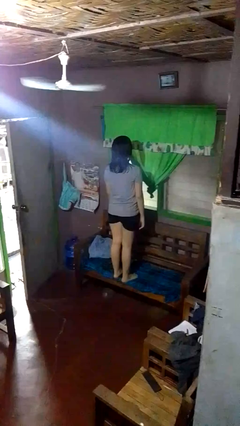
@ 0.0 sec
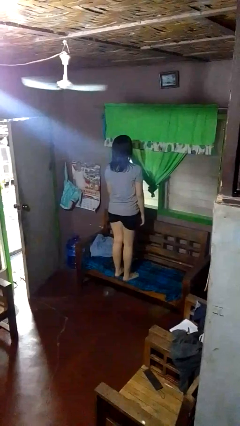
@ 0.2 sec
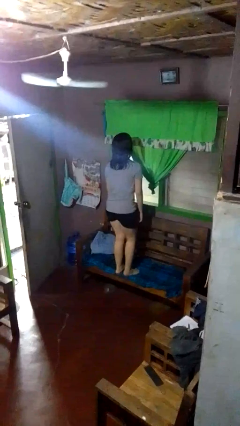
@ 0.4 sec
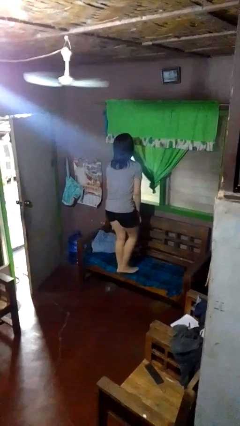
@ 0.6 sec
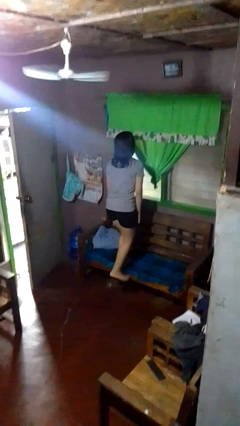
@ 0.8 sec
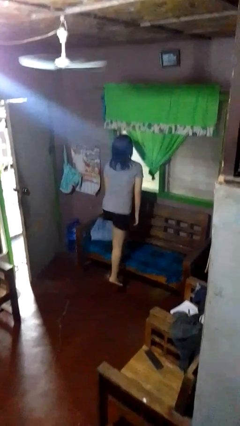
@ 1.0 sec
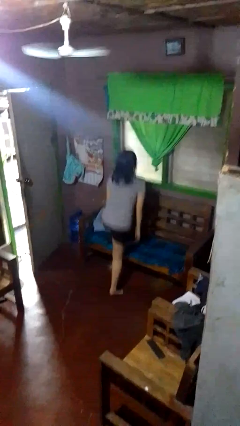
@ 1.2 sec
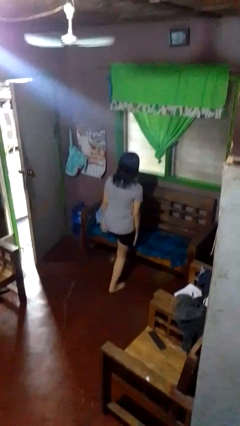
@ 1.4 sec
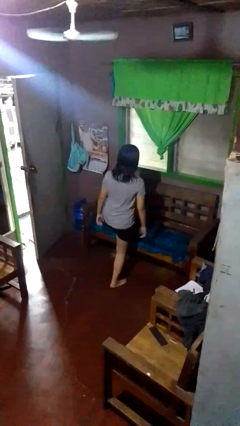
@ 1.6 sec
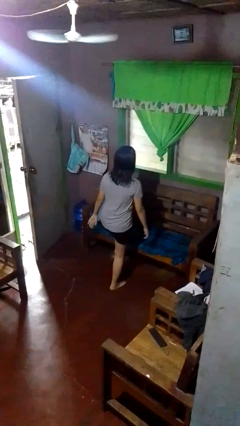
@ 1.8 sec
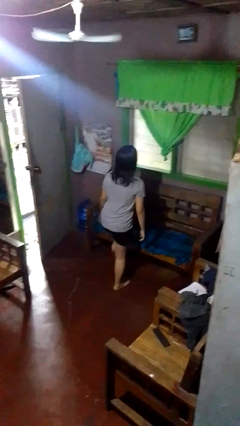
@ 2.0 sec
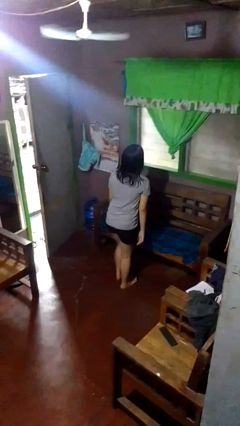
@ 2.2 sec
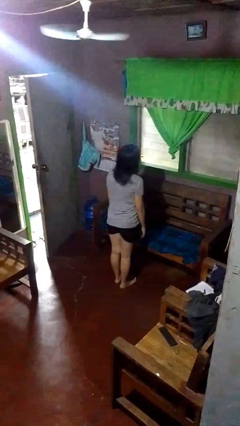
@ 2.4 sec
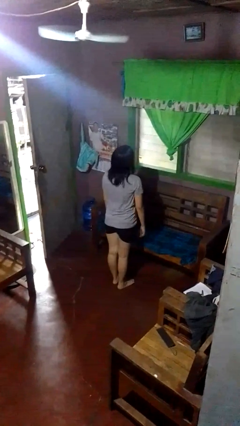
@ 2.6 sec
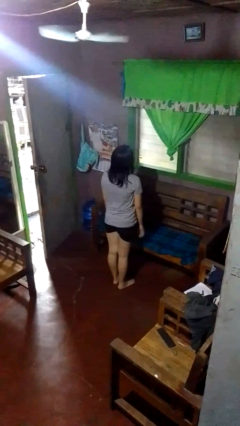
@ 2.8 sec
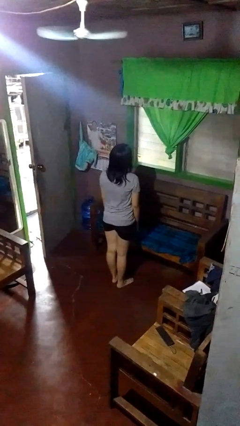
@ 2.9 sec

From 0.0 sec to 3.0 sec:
person climbs off couch

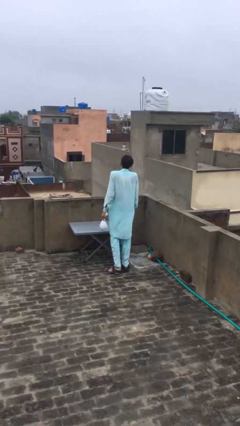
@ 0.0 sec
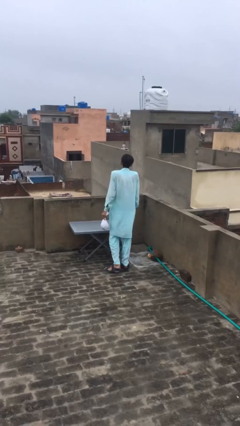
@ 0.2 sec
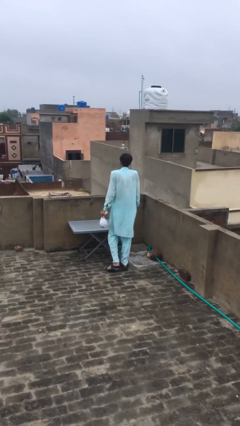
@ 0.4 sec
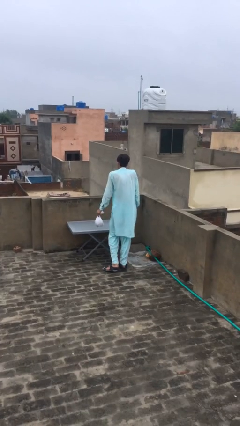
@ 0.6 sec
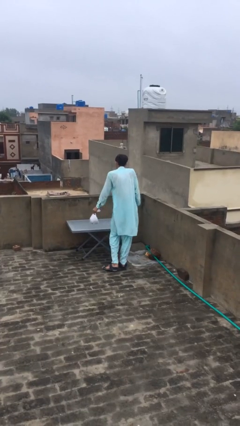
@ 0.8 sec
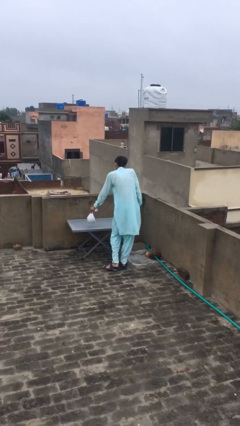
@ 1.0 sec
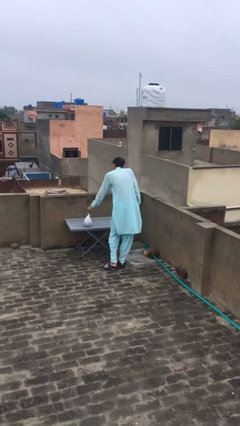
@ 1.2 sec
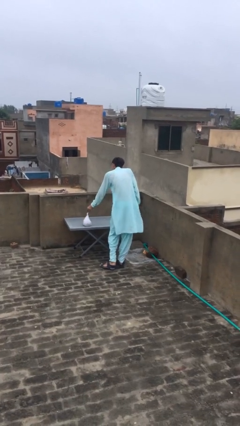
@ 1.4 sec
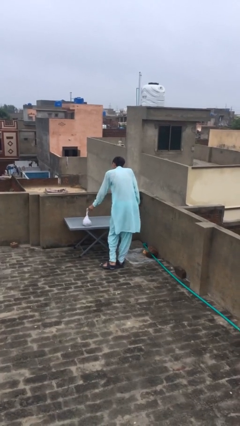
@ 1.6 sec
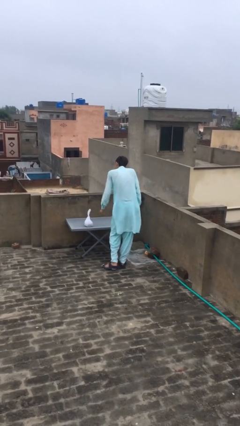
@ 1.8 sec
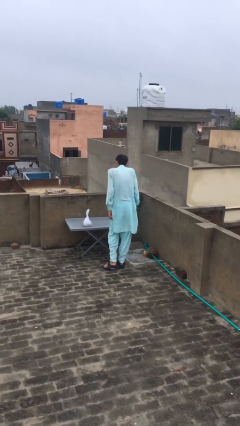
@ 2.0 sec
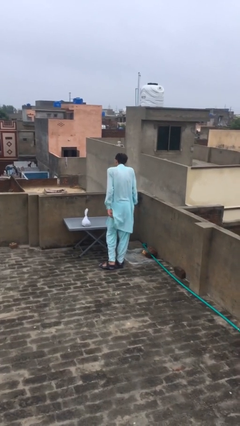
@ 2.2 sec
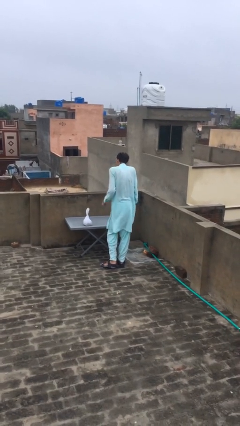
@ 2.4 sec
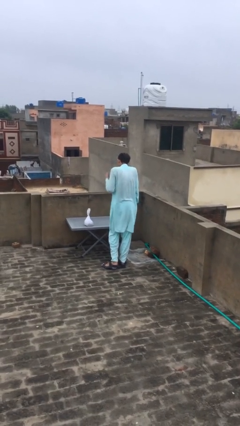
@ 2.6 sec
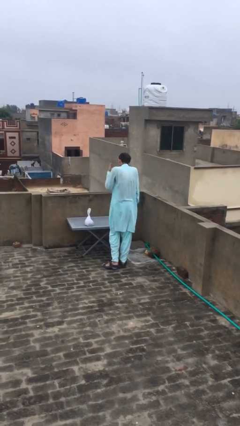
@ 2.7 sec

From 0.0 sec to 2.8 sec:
person puts down object on table

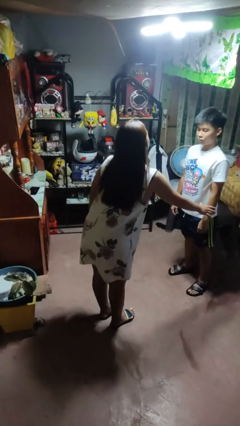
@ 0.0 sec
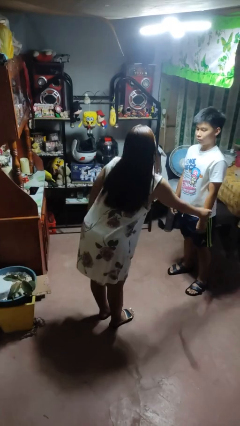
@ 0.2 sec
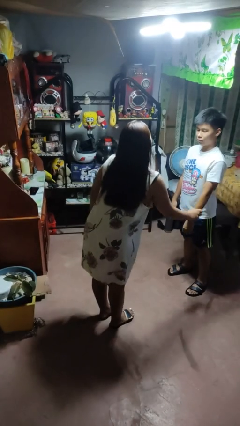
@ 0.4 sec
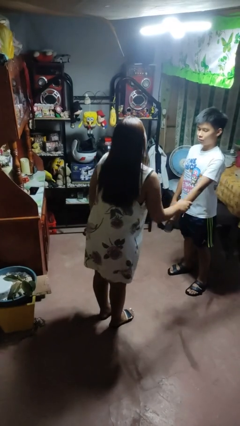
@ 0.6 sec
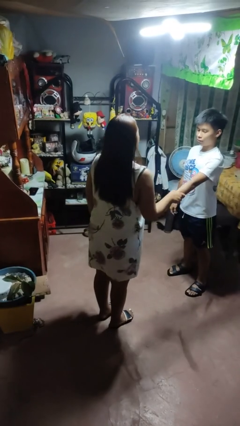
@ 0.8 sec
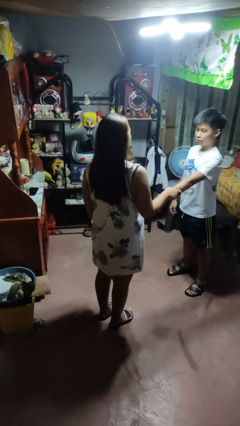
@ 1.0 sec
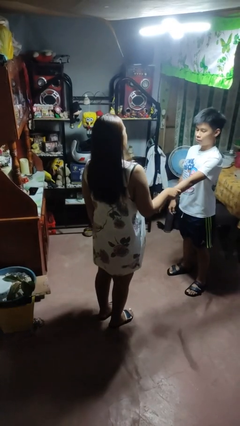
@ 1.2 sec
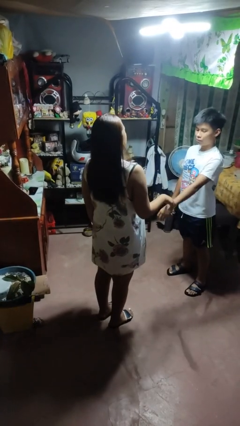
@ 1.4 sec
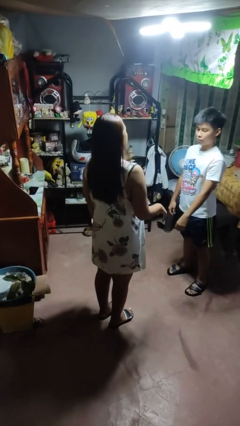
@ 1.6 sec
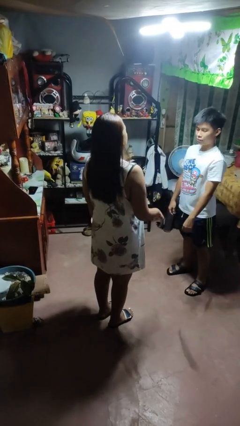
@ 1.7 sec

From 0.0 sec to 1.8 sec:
person grabs person by forearm

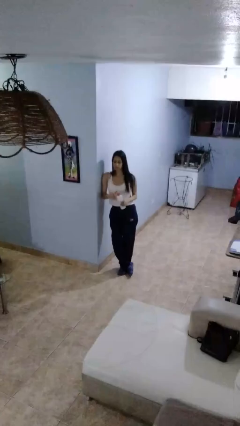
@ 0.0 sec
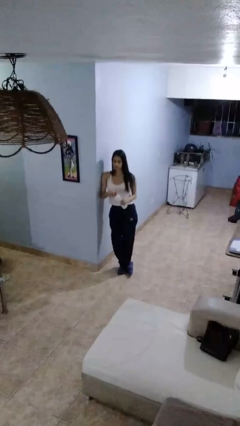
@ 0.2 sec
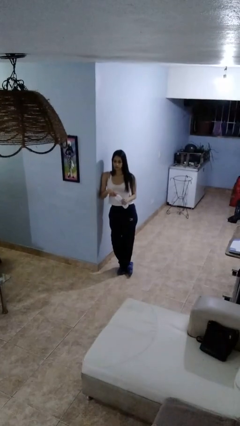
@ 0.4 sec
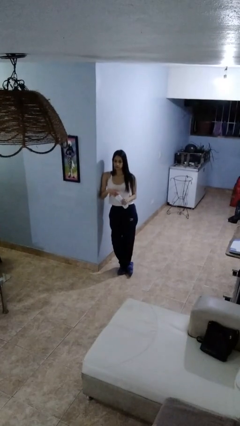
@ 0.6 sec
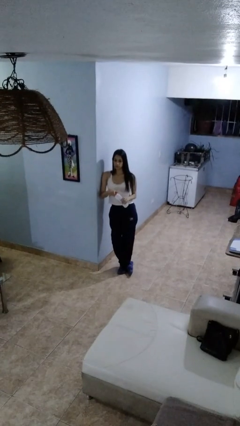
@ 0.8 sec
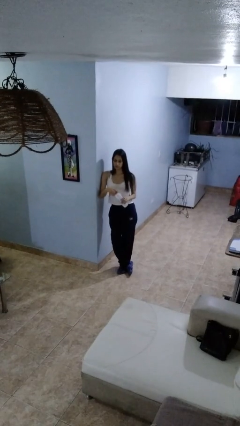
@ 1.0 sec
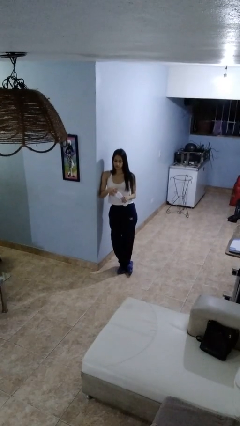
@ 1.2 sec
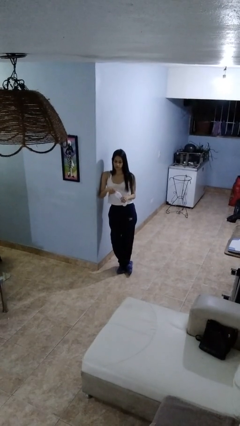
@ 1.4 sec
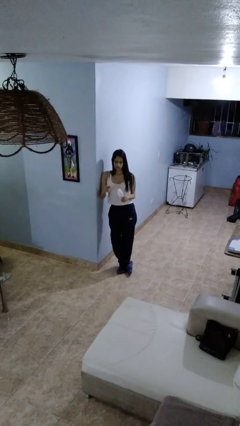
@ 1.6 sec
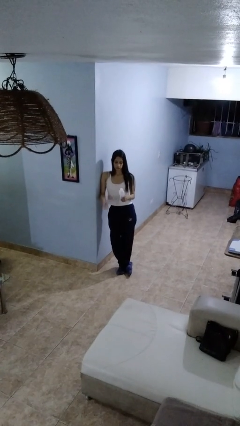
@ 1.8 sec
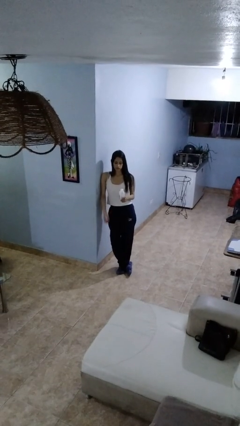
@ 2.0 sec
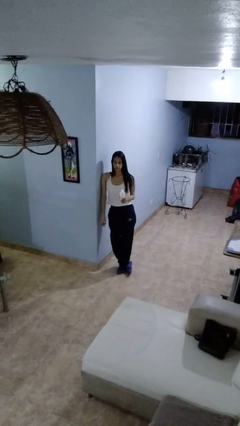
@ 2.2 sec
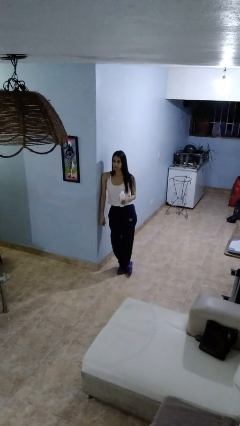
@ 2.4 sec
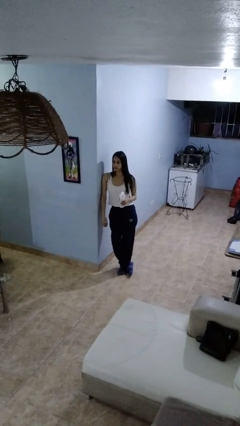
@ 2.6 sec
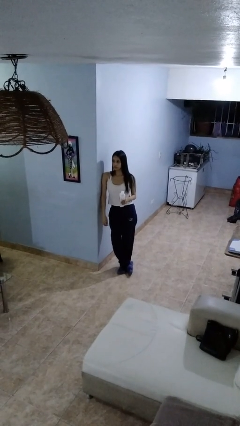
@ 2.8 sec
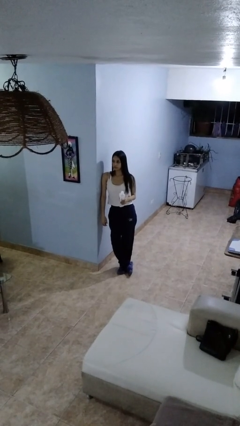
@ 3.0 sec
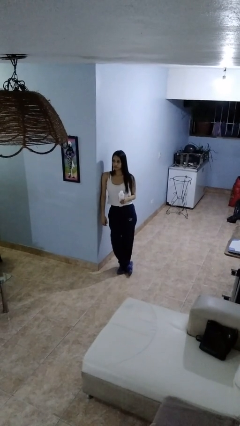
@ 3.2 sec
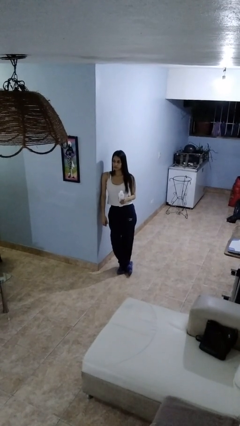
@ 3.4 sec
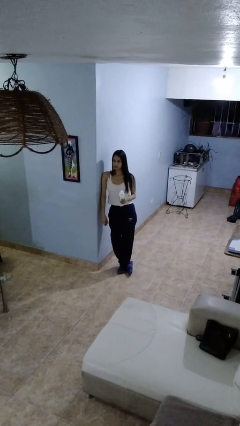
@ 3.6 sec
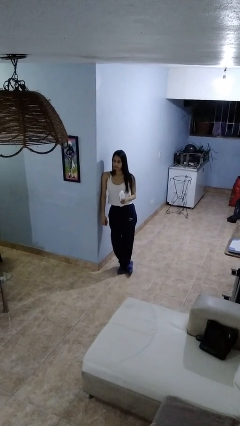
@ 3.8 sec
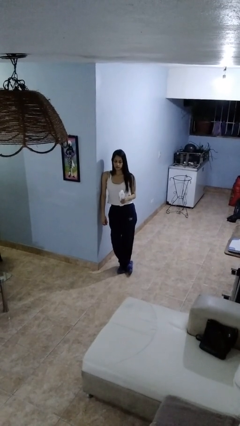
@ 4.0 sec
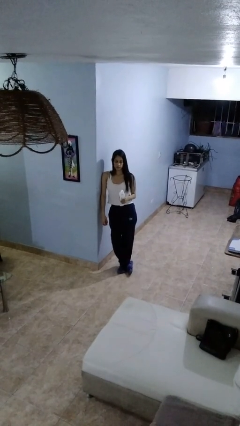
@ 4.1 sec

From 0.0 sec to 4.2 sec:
person unscrews lid from bottle

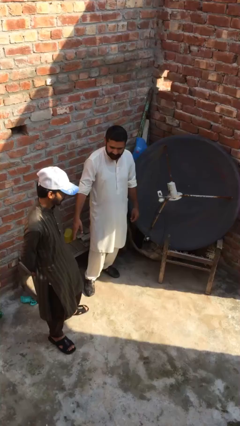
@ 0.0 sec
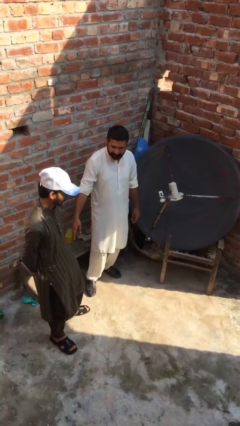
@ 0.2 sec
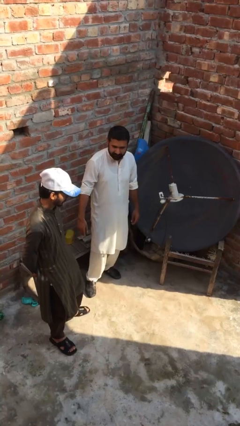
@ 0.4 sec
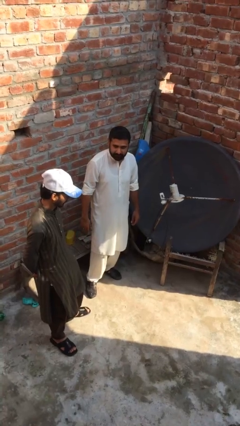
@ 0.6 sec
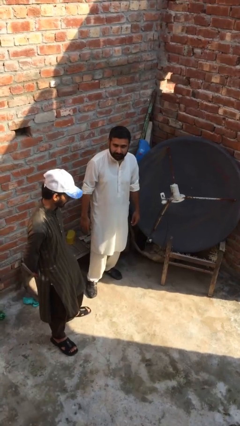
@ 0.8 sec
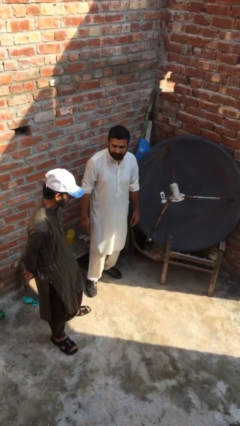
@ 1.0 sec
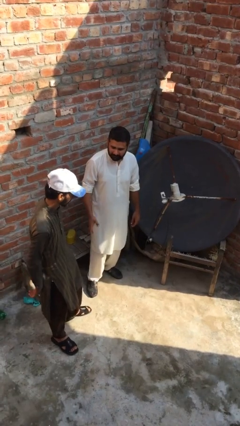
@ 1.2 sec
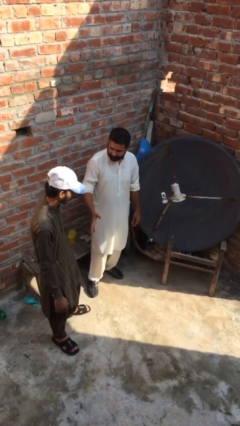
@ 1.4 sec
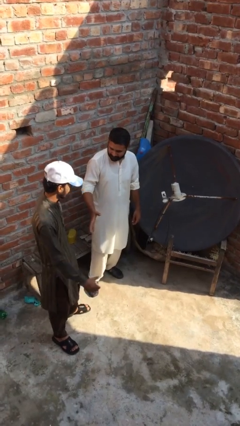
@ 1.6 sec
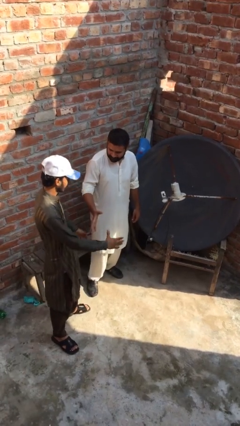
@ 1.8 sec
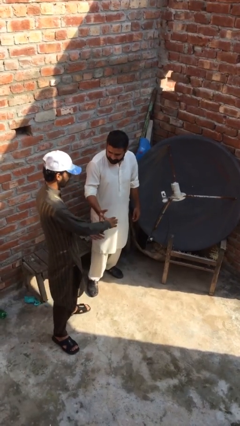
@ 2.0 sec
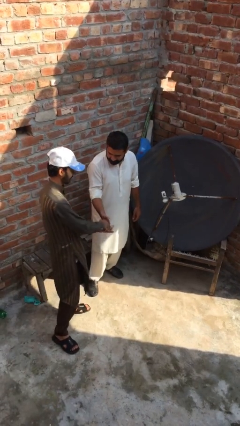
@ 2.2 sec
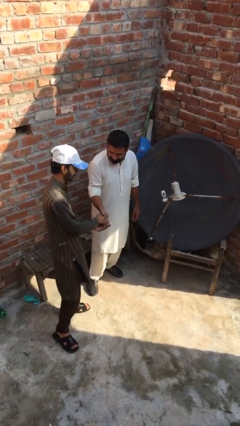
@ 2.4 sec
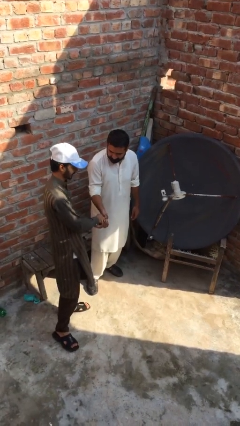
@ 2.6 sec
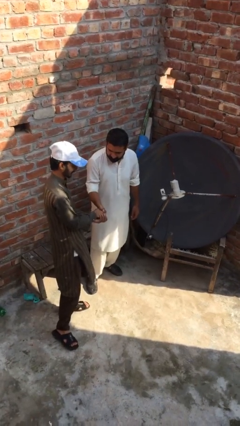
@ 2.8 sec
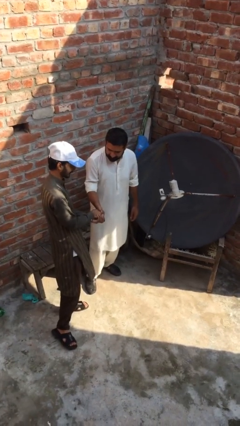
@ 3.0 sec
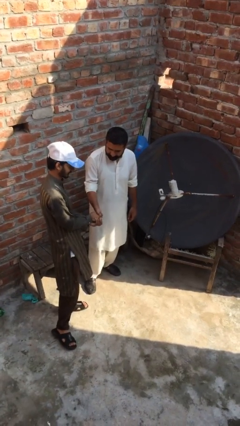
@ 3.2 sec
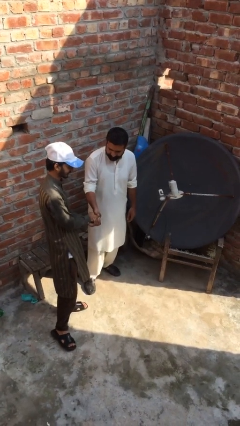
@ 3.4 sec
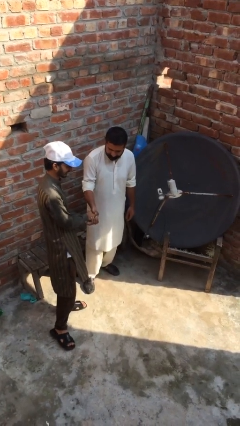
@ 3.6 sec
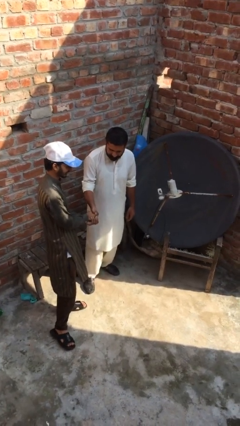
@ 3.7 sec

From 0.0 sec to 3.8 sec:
person shakes hand

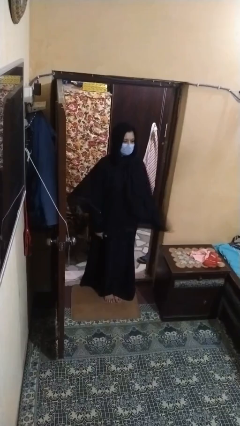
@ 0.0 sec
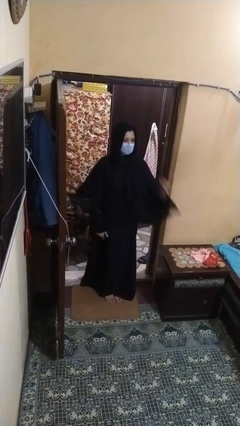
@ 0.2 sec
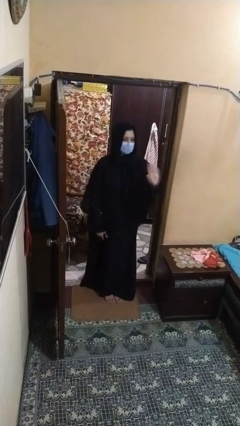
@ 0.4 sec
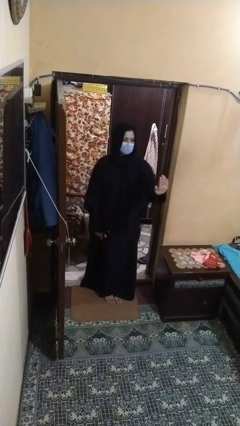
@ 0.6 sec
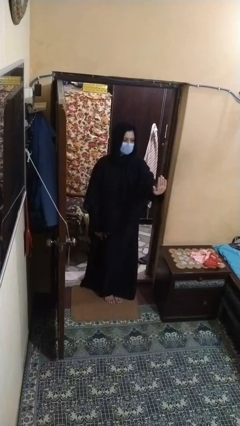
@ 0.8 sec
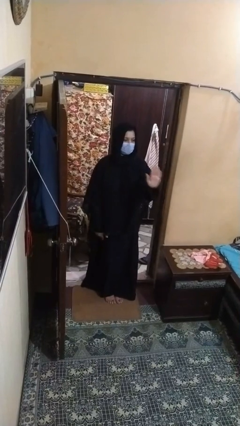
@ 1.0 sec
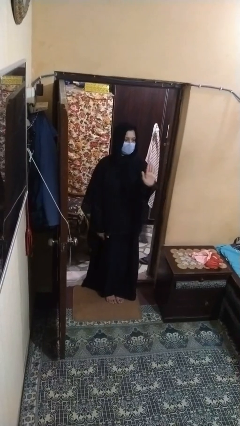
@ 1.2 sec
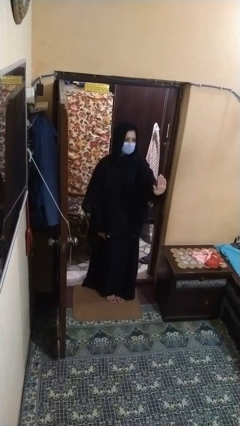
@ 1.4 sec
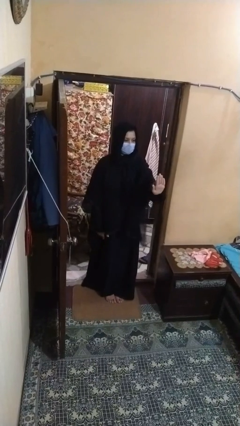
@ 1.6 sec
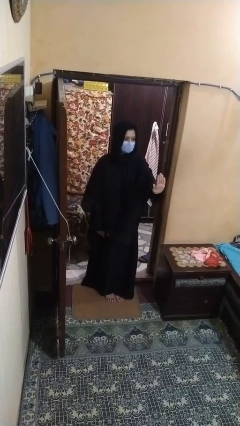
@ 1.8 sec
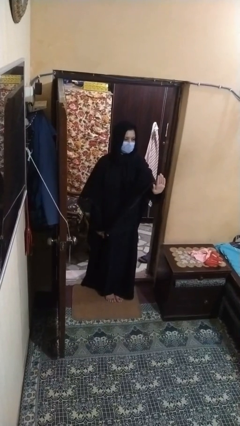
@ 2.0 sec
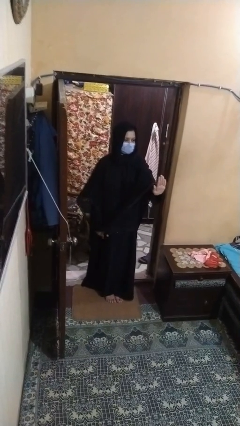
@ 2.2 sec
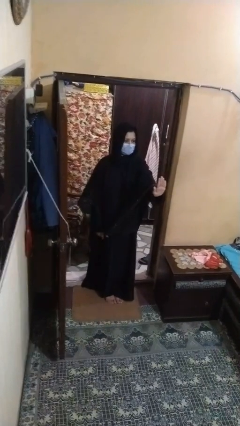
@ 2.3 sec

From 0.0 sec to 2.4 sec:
person gestures stop
